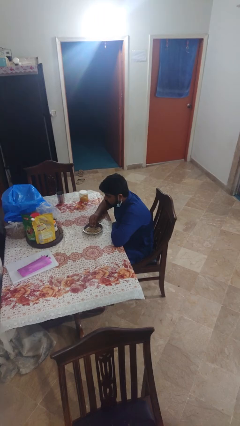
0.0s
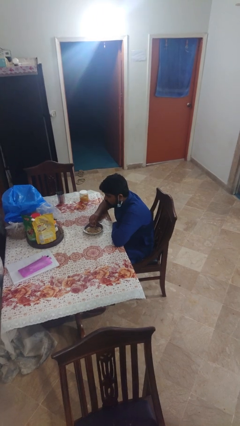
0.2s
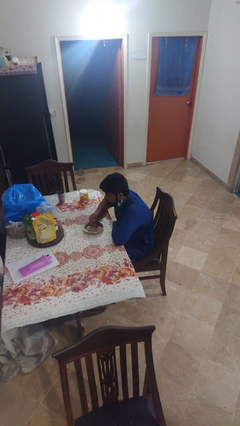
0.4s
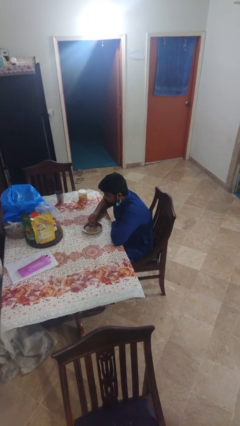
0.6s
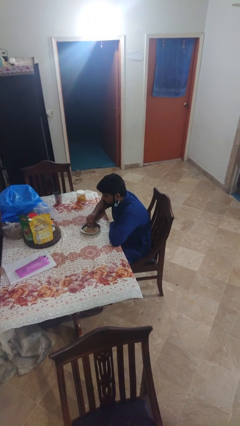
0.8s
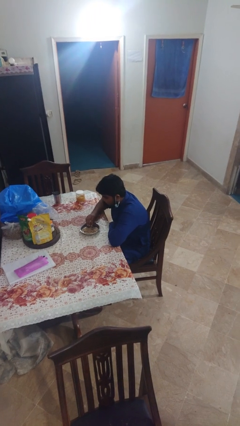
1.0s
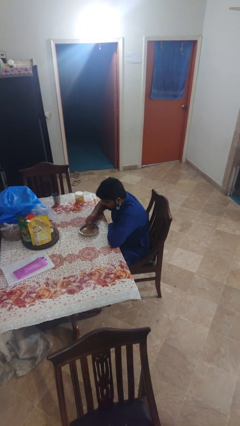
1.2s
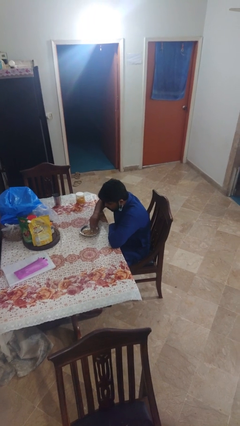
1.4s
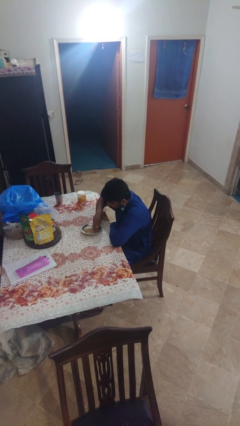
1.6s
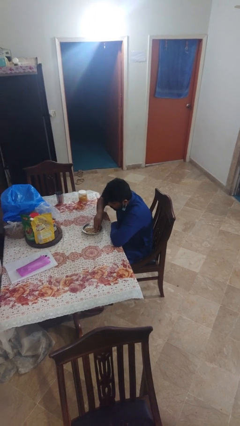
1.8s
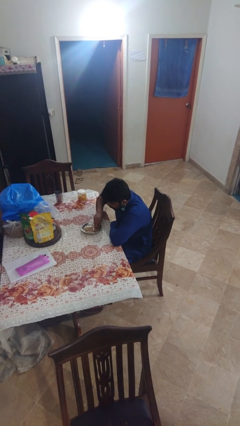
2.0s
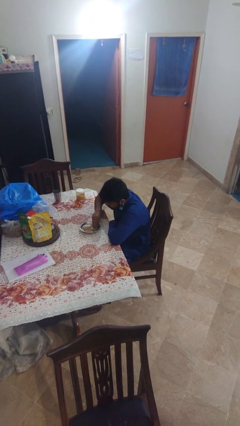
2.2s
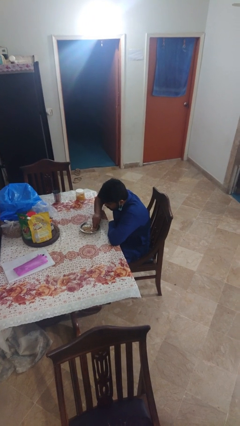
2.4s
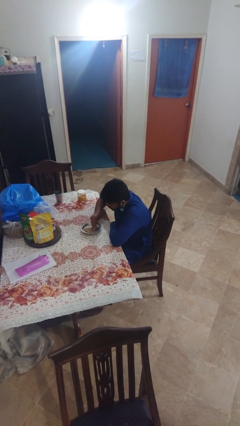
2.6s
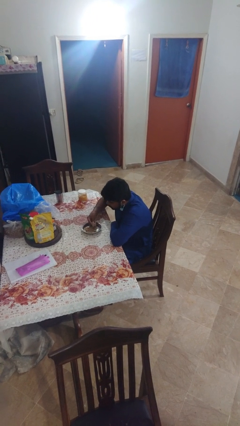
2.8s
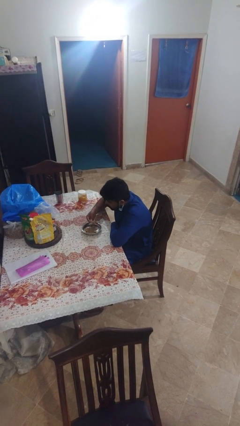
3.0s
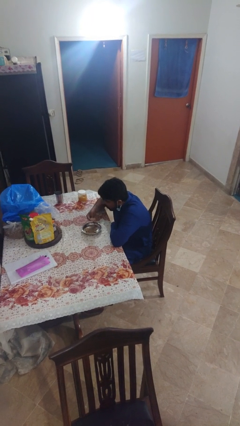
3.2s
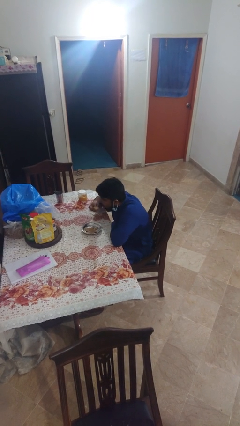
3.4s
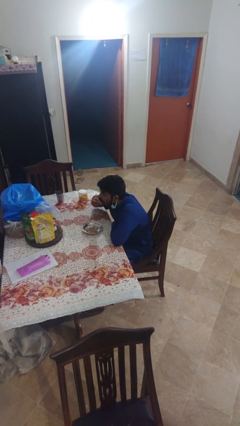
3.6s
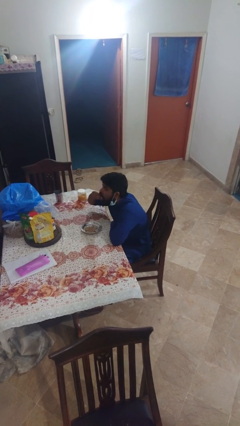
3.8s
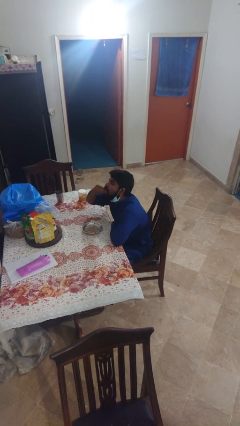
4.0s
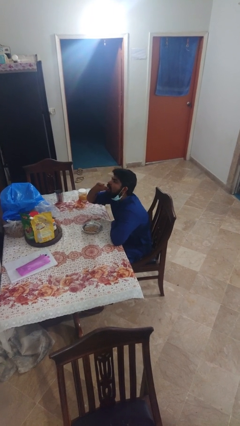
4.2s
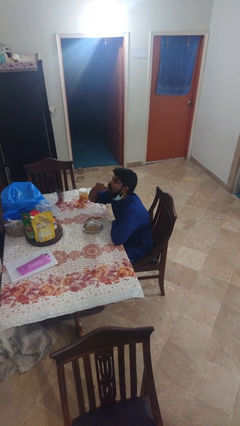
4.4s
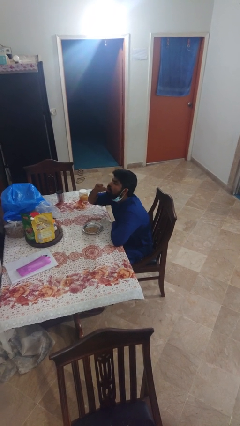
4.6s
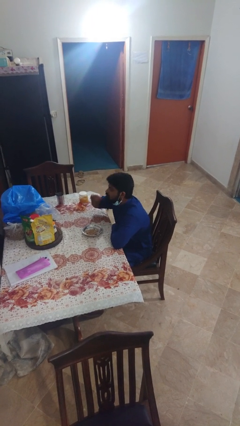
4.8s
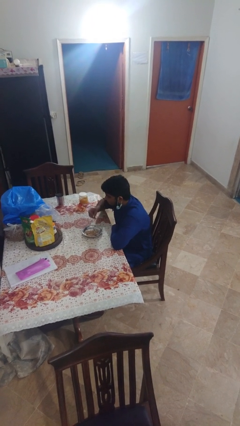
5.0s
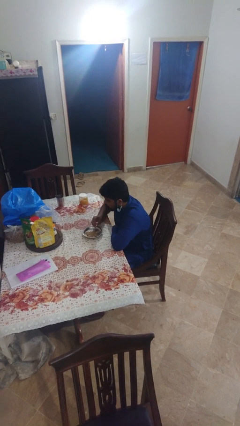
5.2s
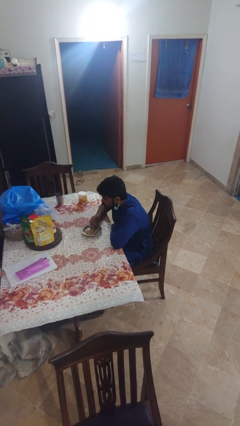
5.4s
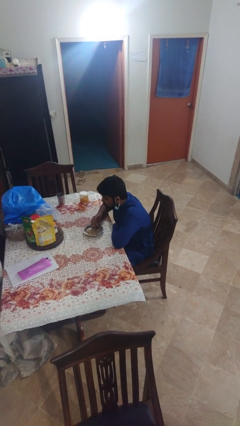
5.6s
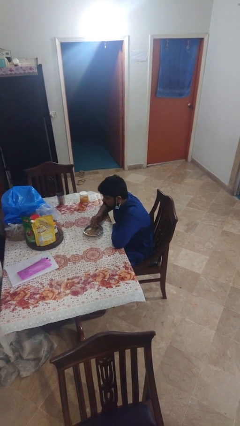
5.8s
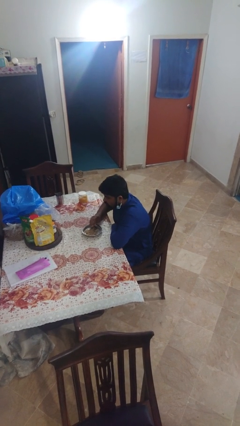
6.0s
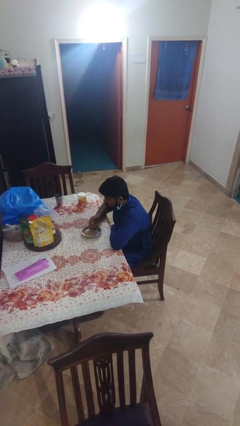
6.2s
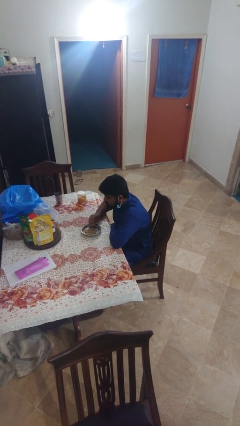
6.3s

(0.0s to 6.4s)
person eats with hands

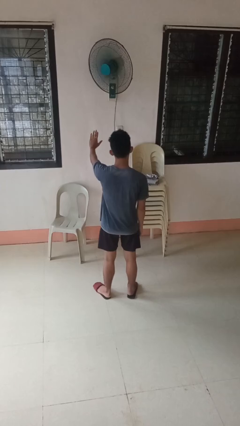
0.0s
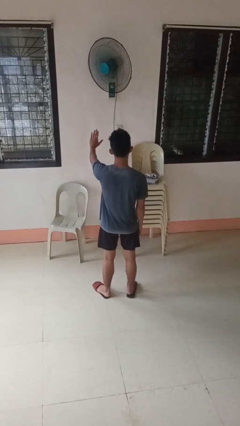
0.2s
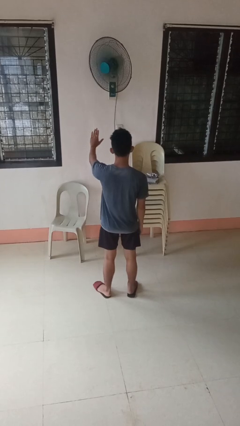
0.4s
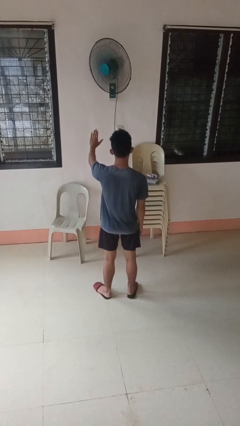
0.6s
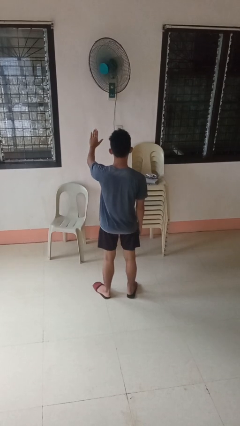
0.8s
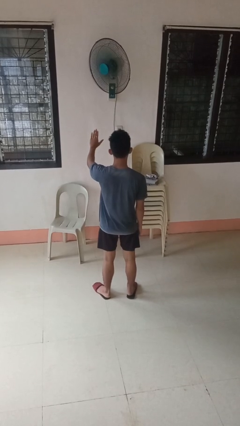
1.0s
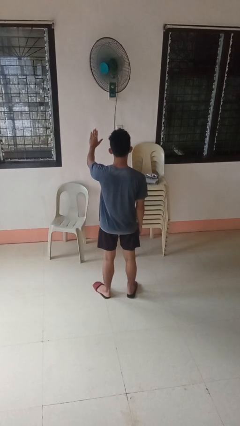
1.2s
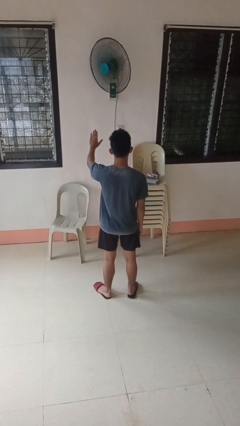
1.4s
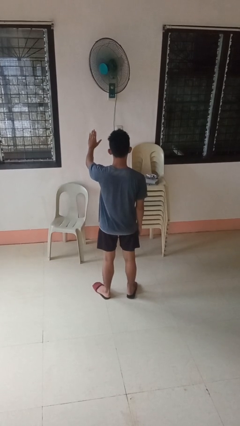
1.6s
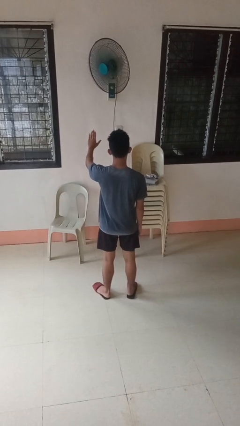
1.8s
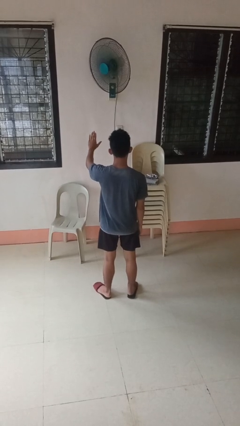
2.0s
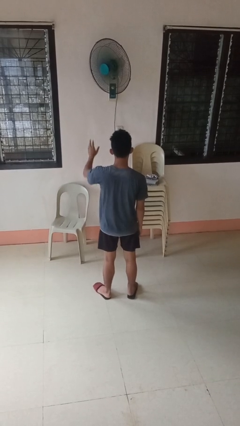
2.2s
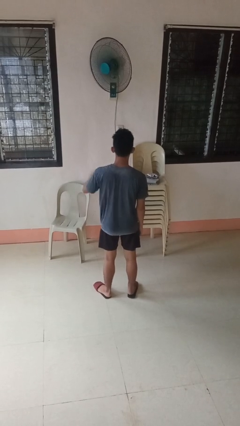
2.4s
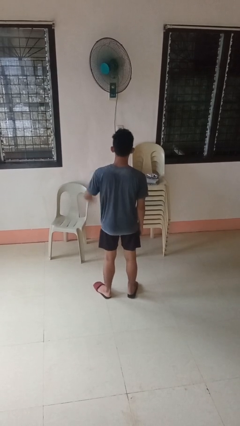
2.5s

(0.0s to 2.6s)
person gestures stop

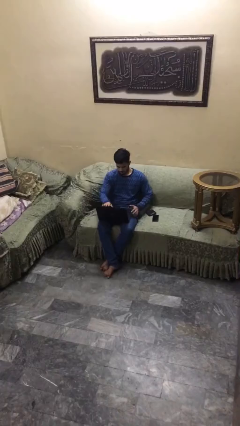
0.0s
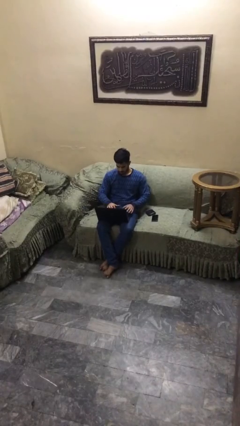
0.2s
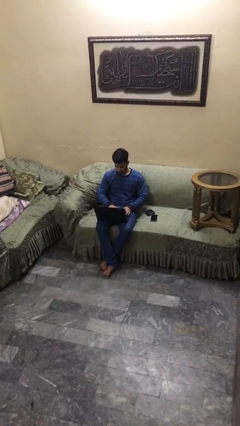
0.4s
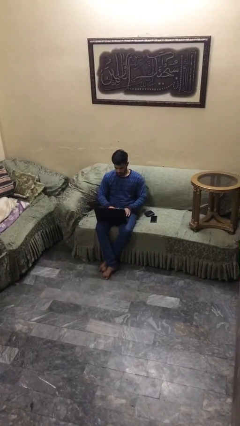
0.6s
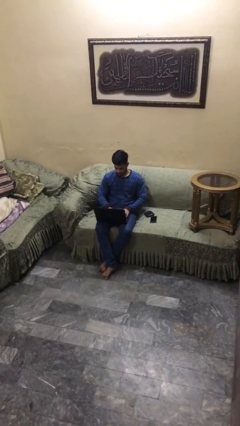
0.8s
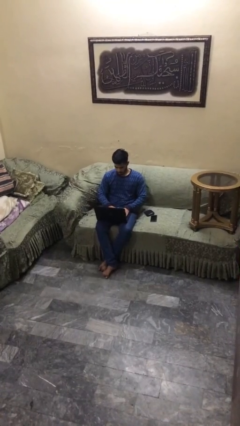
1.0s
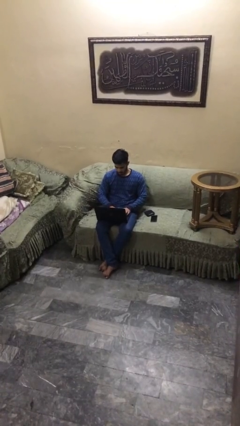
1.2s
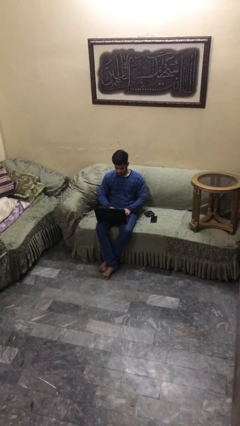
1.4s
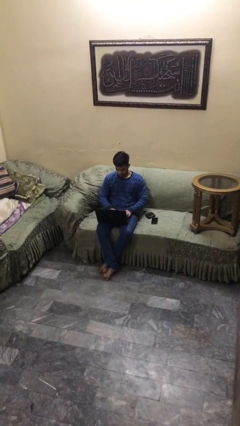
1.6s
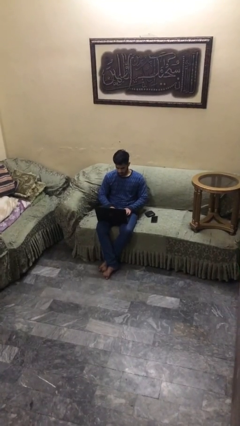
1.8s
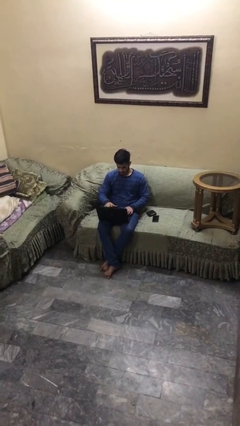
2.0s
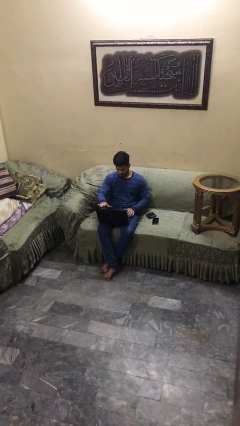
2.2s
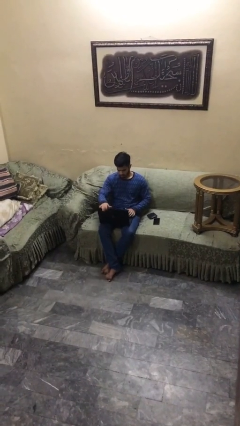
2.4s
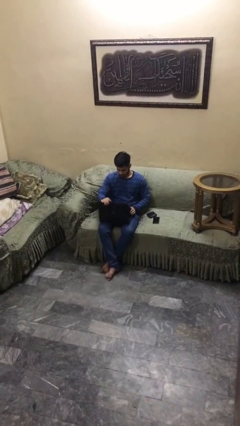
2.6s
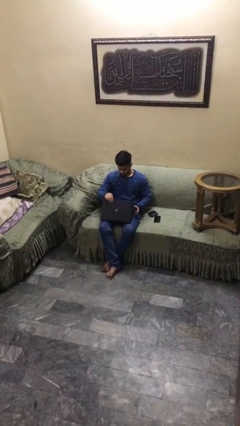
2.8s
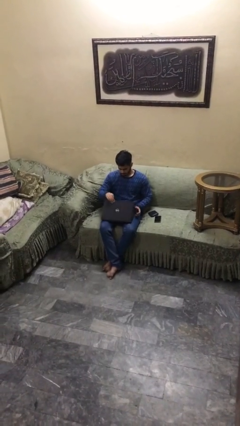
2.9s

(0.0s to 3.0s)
person interacts with laptop

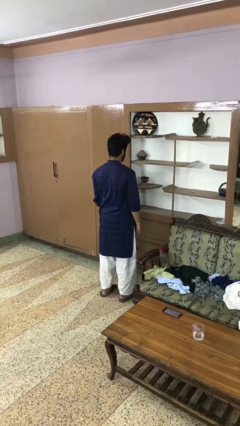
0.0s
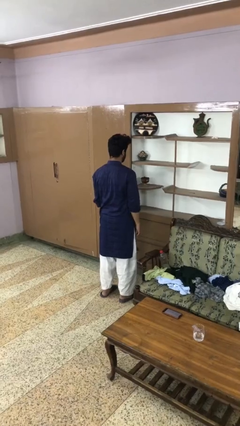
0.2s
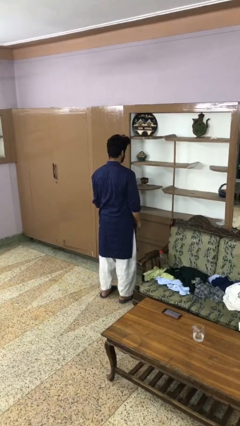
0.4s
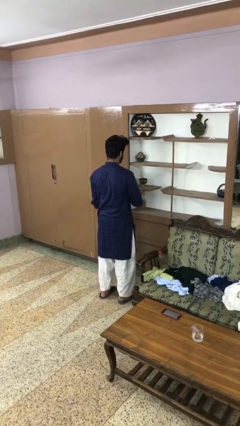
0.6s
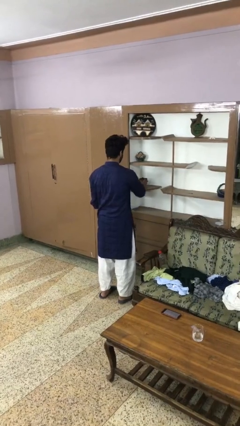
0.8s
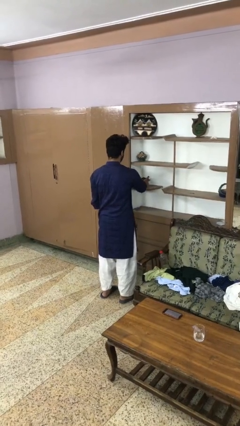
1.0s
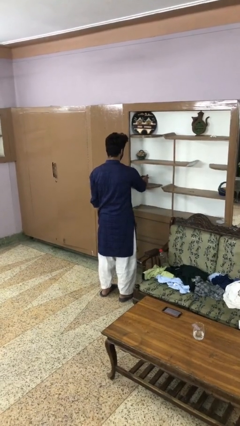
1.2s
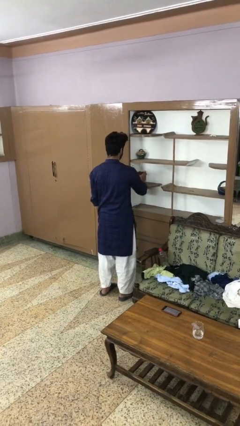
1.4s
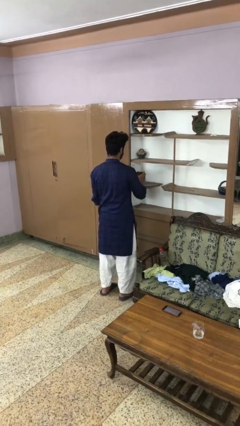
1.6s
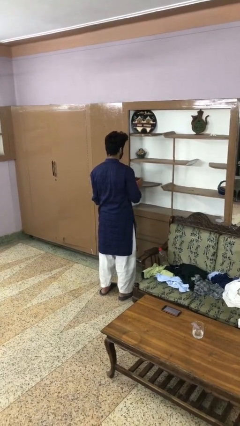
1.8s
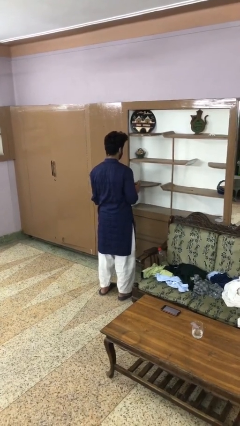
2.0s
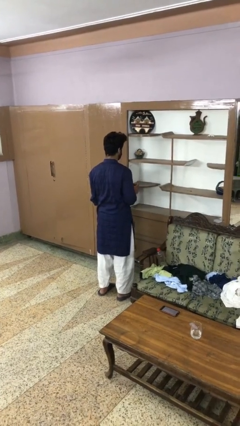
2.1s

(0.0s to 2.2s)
person picks up object from shelf

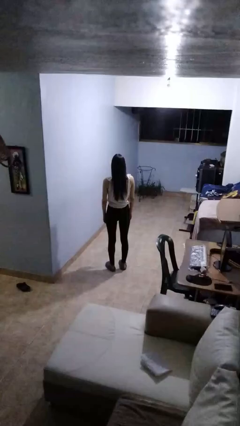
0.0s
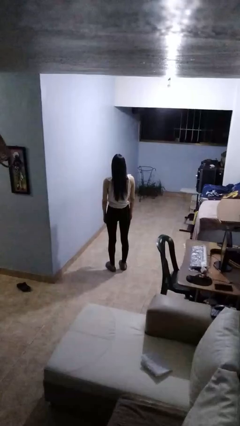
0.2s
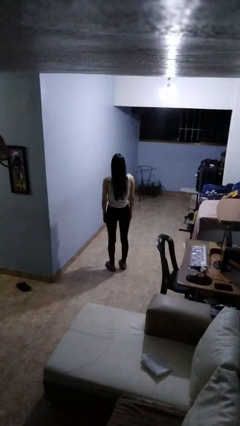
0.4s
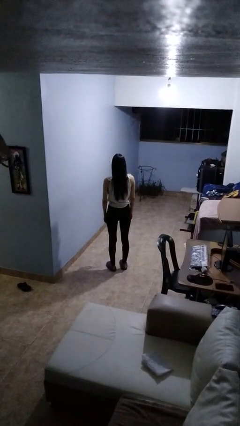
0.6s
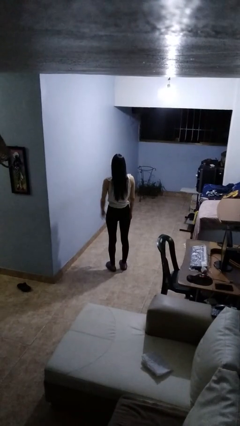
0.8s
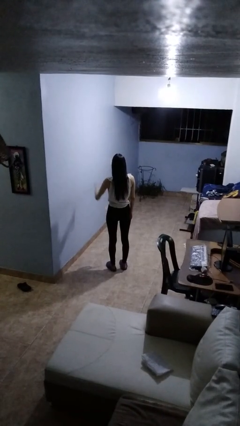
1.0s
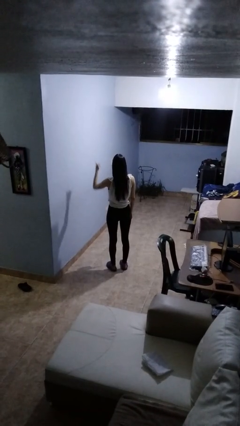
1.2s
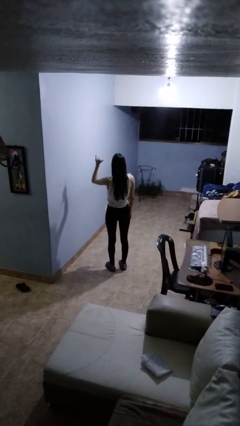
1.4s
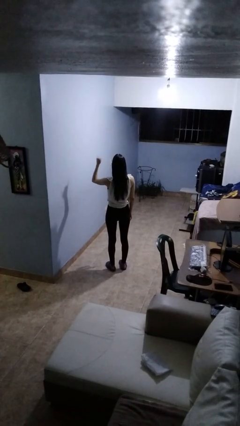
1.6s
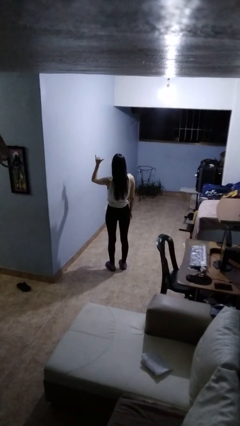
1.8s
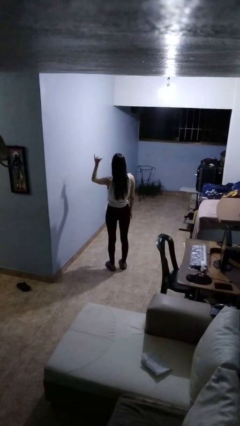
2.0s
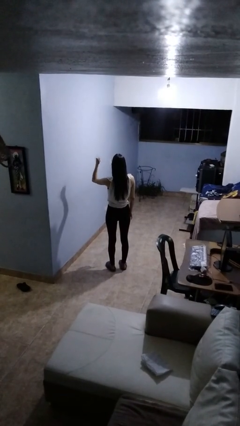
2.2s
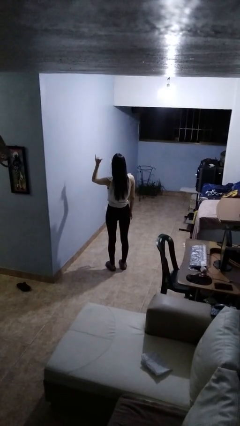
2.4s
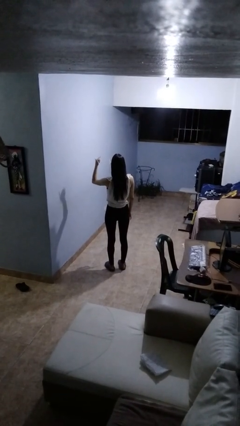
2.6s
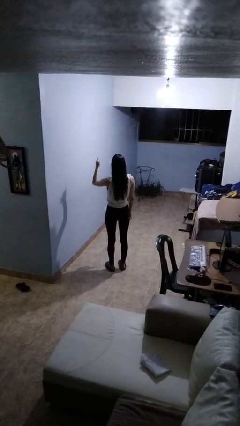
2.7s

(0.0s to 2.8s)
person gestures hang loose

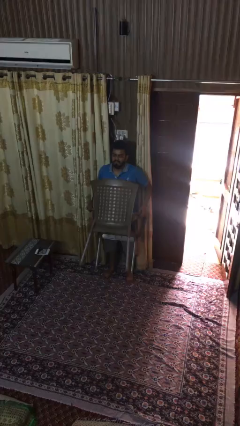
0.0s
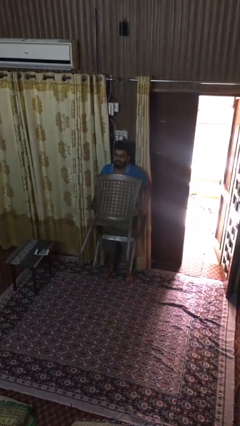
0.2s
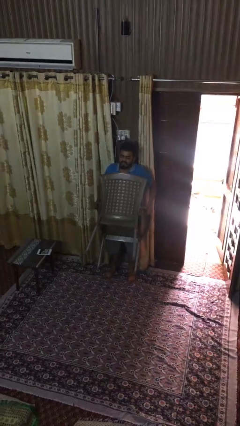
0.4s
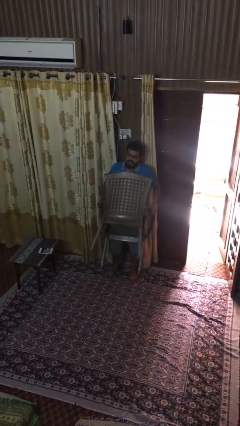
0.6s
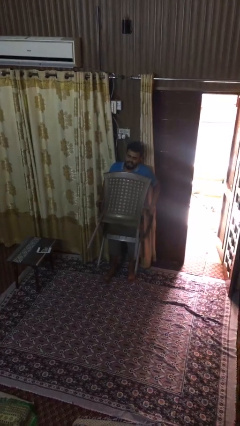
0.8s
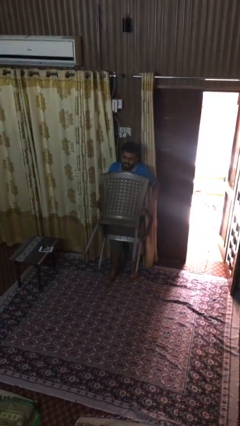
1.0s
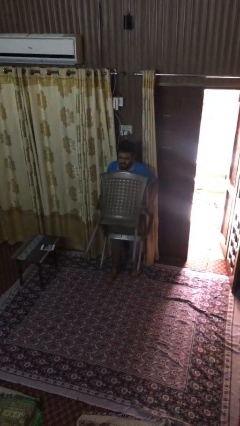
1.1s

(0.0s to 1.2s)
person picks up object from floor
